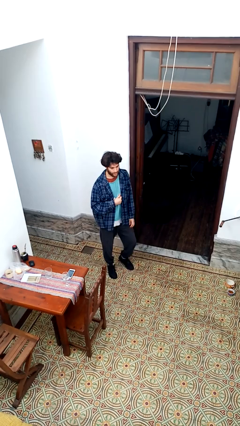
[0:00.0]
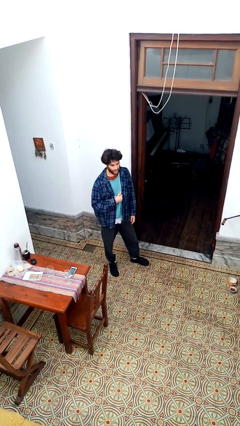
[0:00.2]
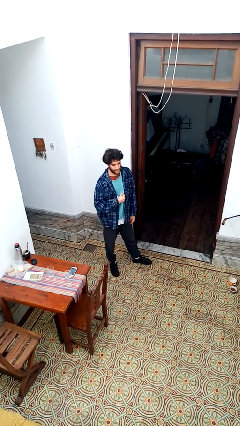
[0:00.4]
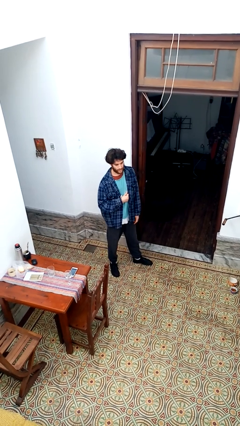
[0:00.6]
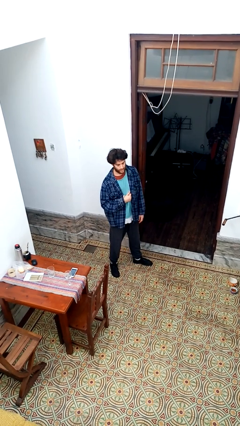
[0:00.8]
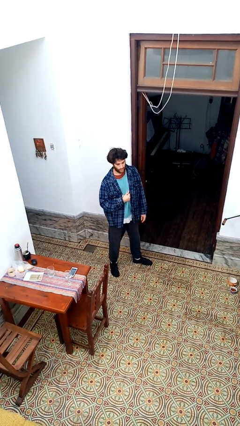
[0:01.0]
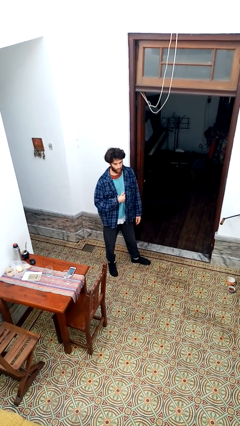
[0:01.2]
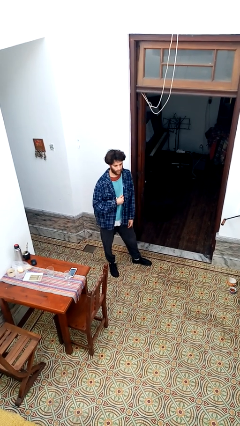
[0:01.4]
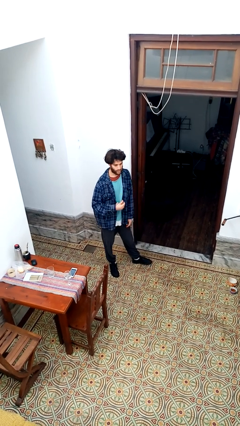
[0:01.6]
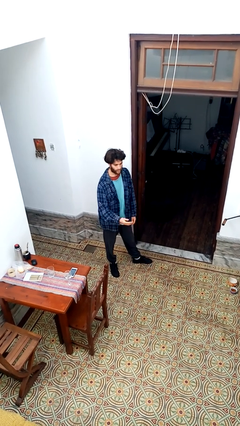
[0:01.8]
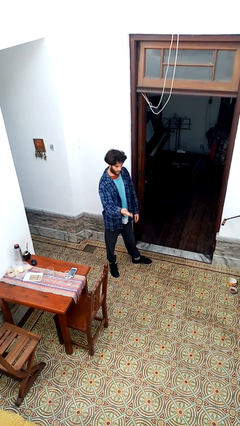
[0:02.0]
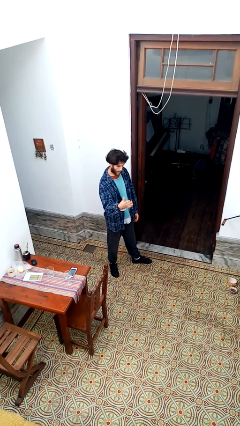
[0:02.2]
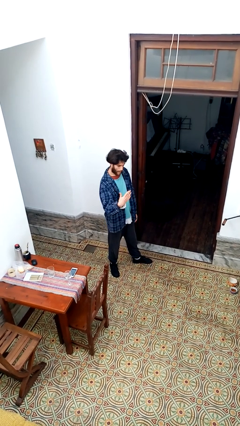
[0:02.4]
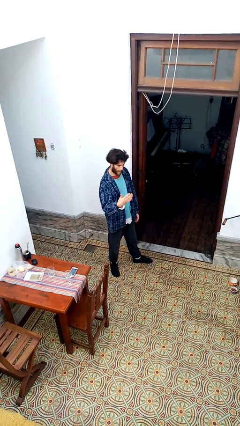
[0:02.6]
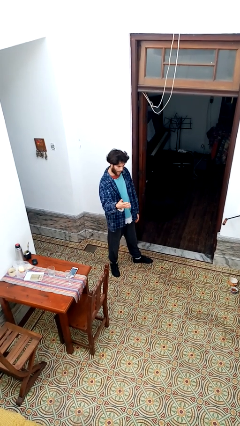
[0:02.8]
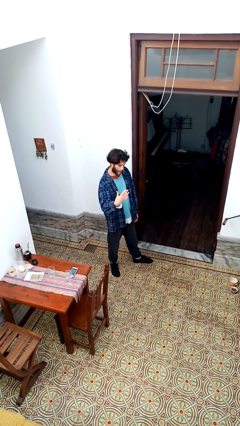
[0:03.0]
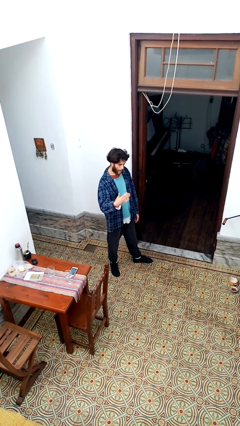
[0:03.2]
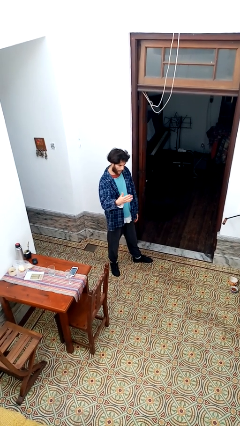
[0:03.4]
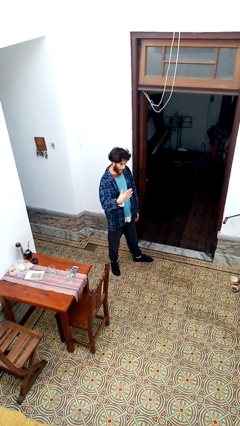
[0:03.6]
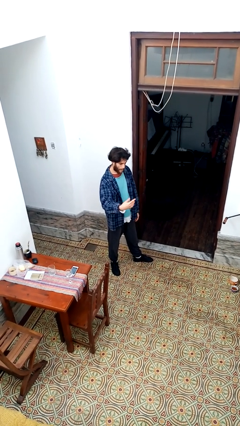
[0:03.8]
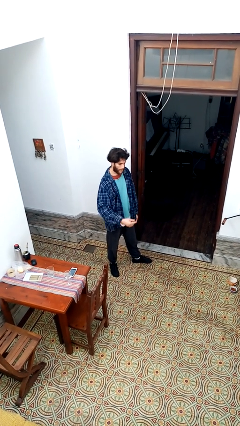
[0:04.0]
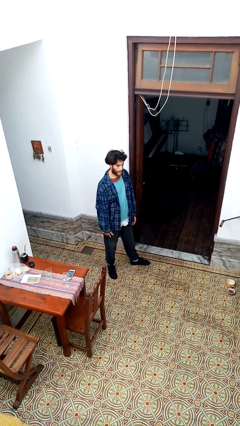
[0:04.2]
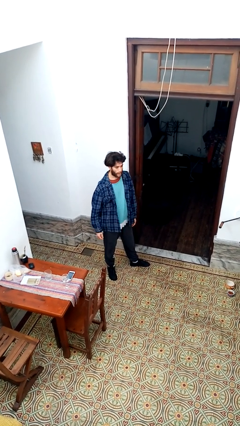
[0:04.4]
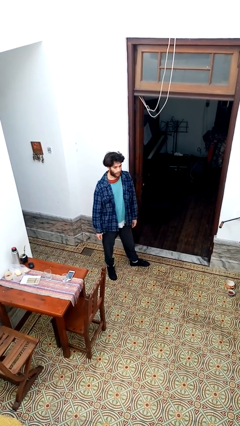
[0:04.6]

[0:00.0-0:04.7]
person gestures come here

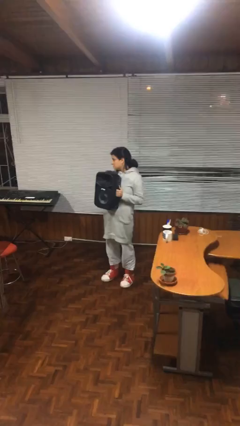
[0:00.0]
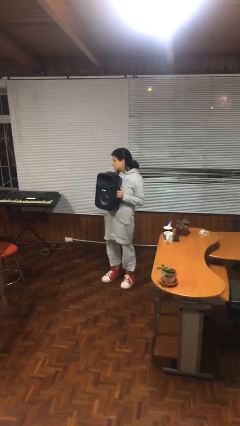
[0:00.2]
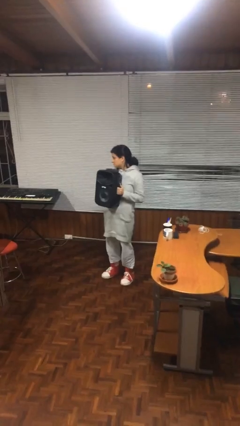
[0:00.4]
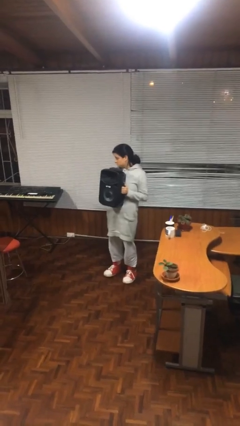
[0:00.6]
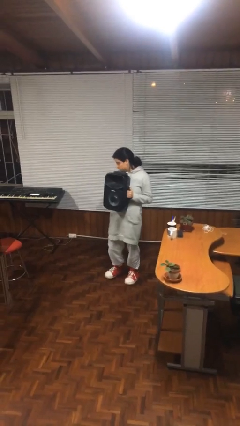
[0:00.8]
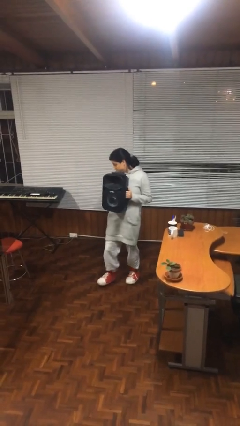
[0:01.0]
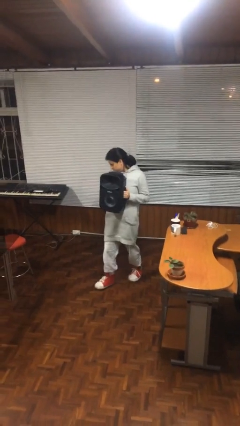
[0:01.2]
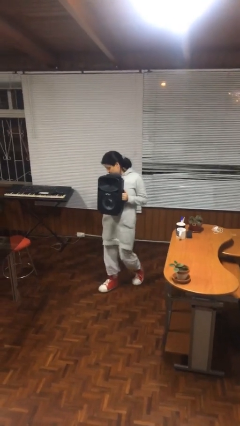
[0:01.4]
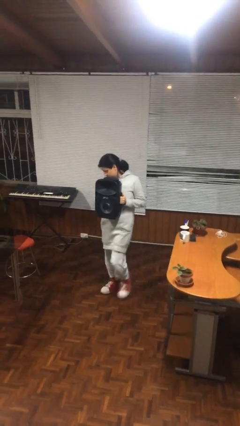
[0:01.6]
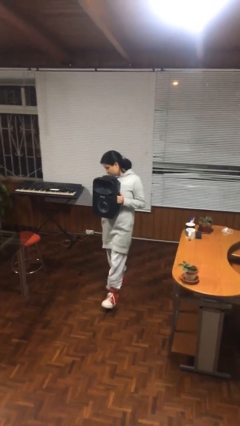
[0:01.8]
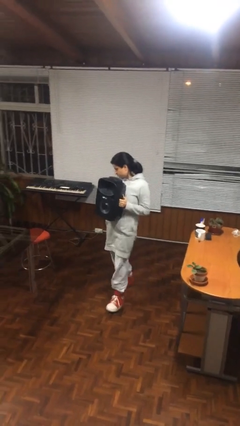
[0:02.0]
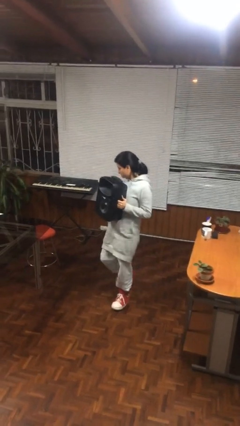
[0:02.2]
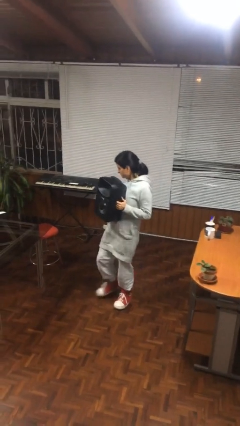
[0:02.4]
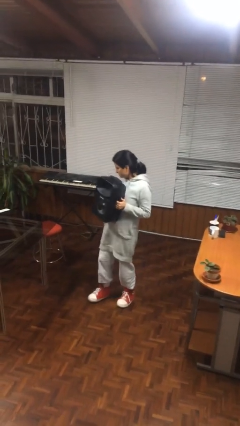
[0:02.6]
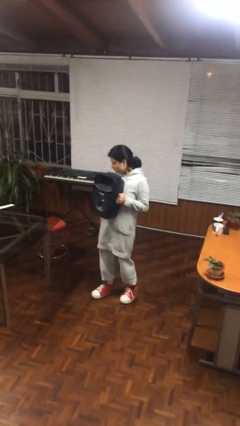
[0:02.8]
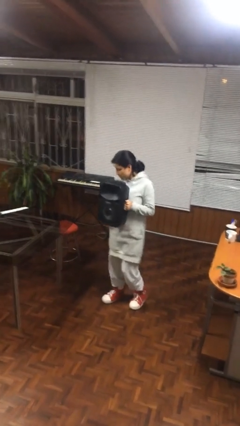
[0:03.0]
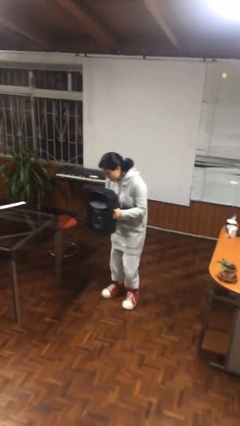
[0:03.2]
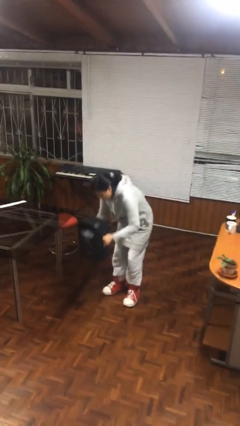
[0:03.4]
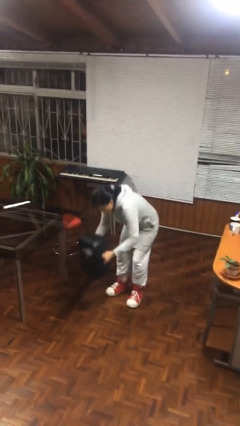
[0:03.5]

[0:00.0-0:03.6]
person carries heavy object

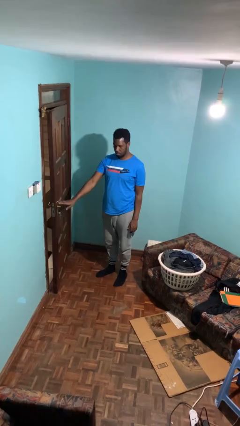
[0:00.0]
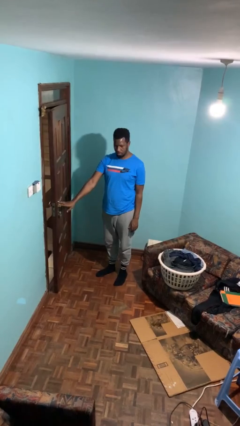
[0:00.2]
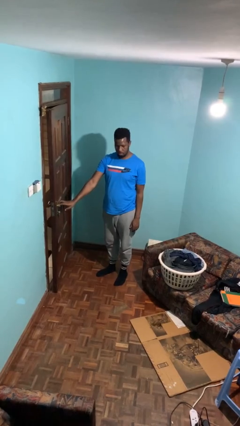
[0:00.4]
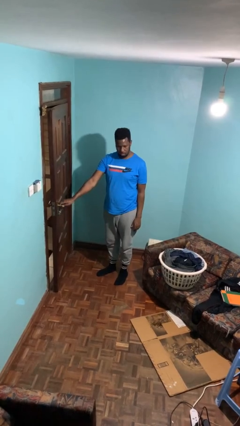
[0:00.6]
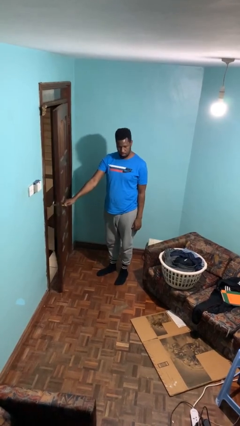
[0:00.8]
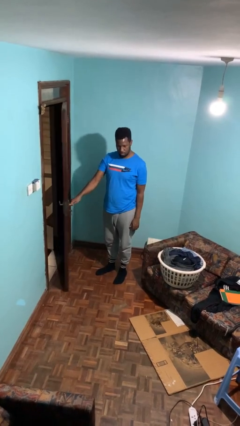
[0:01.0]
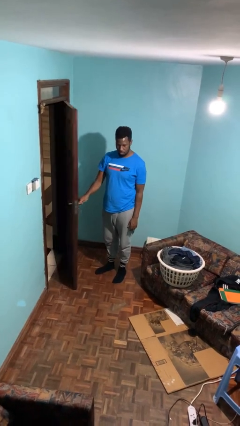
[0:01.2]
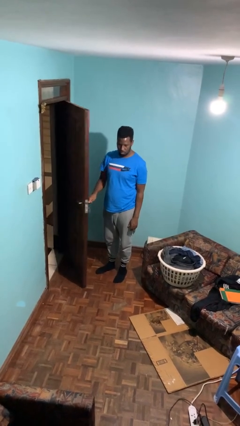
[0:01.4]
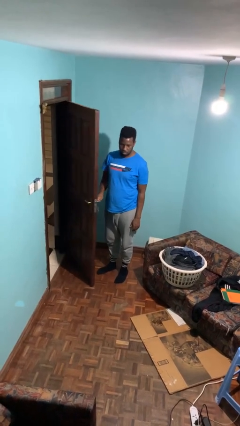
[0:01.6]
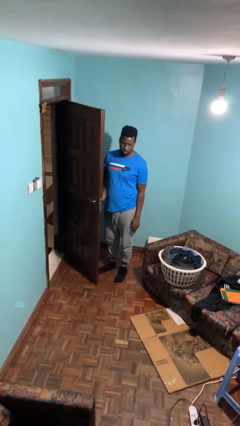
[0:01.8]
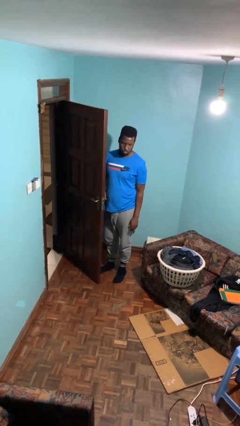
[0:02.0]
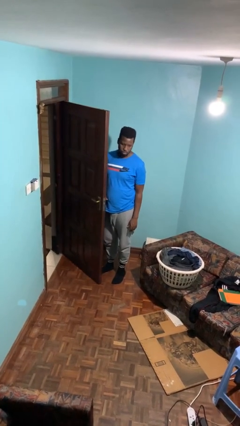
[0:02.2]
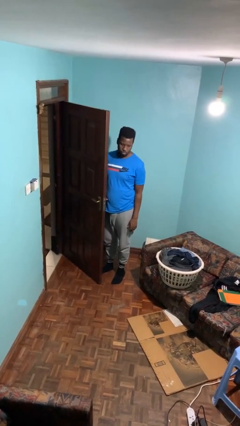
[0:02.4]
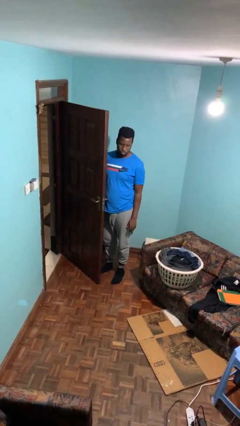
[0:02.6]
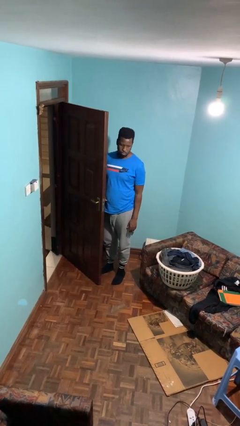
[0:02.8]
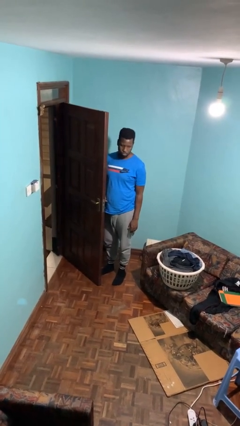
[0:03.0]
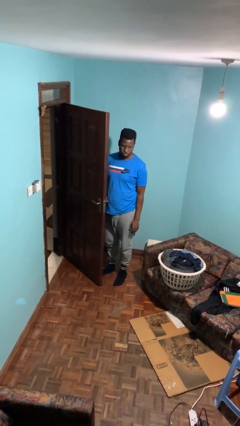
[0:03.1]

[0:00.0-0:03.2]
person opens facility door

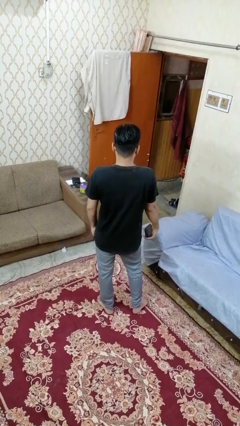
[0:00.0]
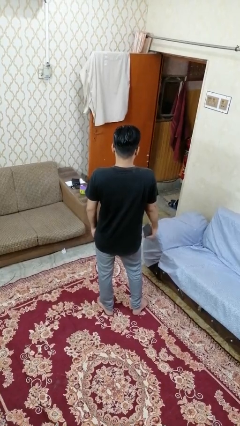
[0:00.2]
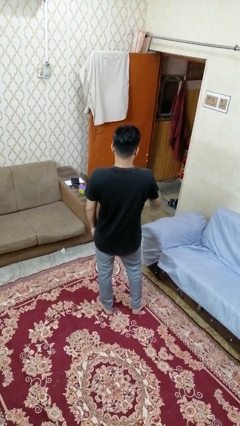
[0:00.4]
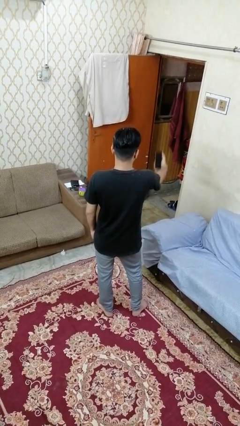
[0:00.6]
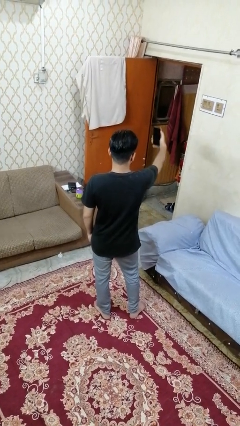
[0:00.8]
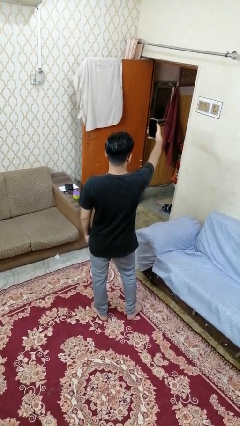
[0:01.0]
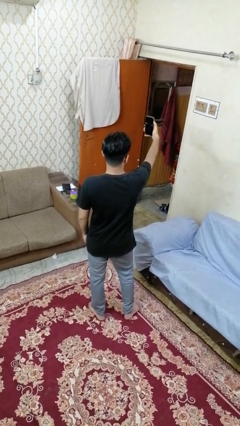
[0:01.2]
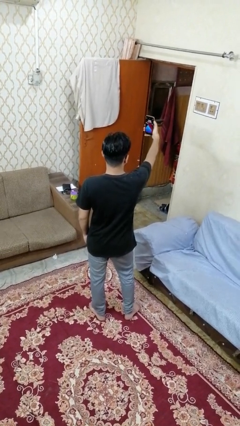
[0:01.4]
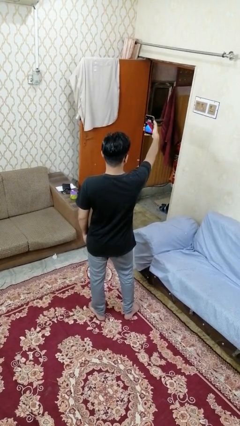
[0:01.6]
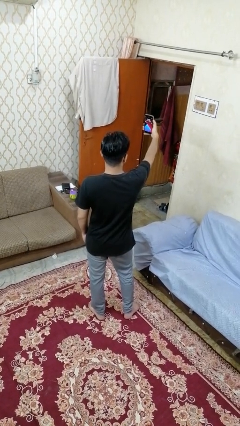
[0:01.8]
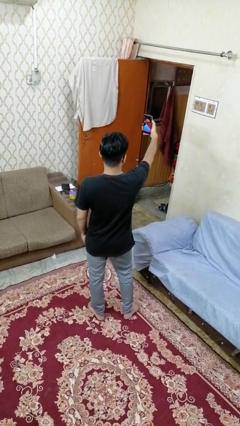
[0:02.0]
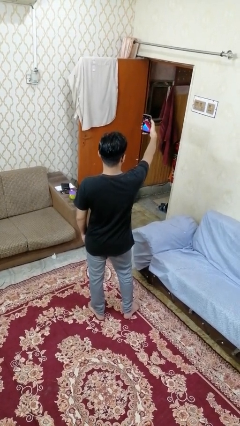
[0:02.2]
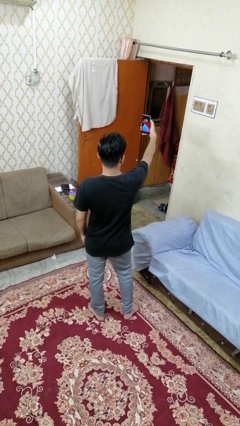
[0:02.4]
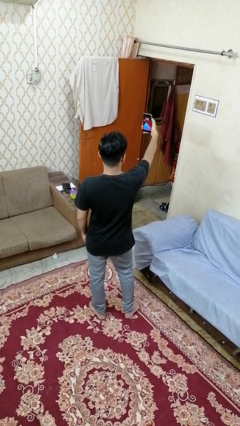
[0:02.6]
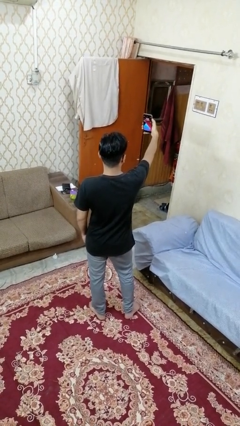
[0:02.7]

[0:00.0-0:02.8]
person takes selfie

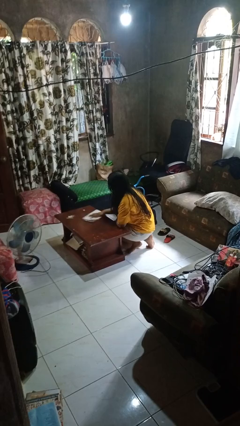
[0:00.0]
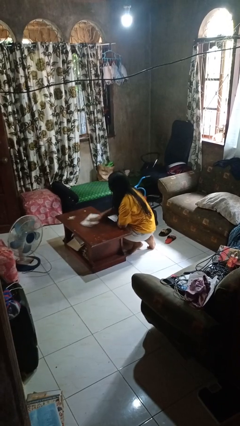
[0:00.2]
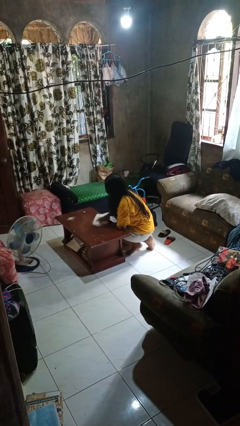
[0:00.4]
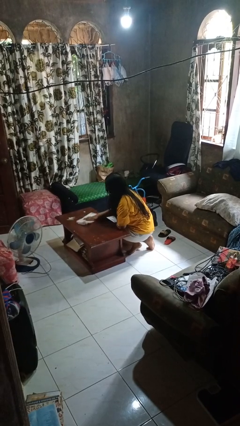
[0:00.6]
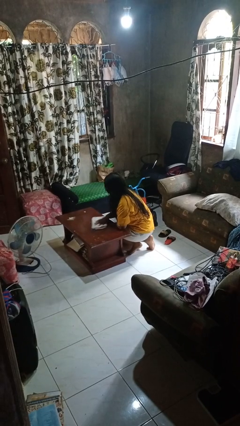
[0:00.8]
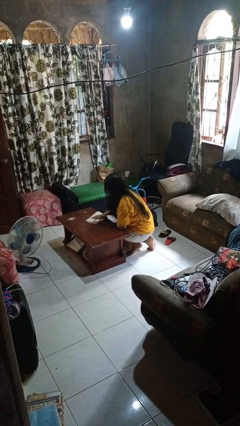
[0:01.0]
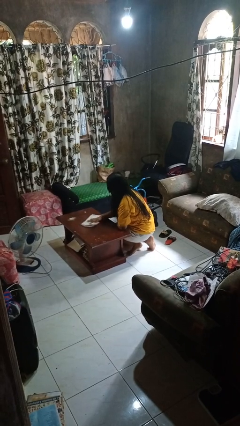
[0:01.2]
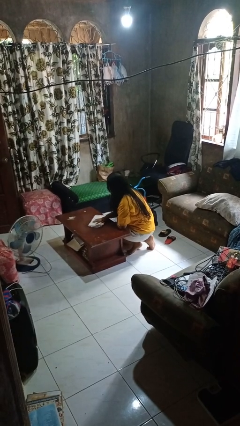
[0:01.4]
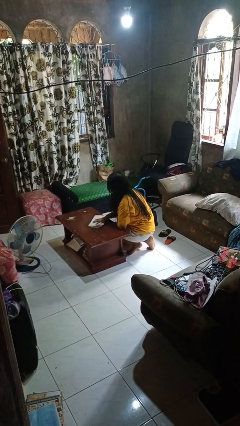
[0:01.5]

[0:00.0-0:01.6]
person cleans table with rag

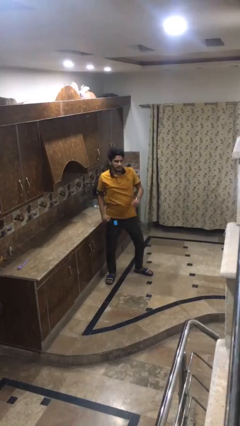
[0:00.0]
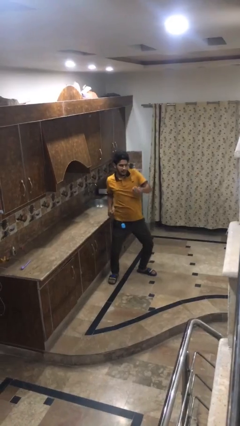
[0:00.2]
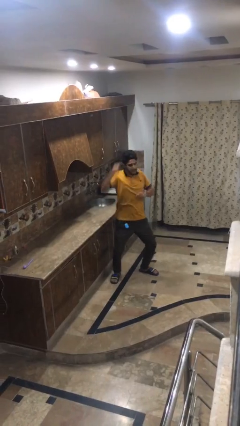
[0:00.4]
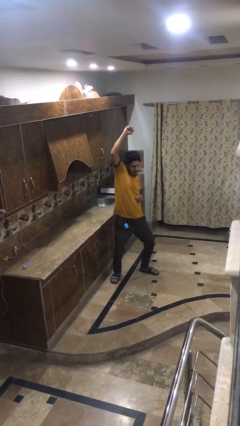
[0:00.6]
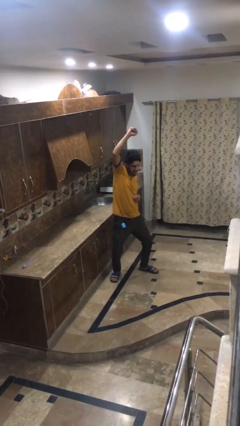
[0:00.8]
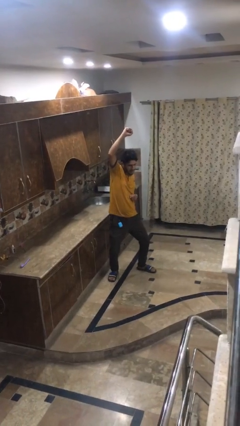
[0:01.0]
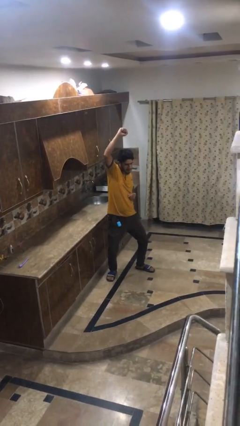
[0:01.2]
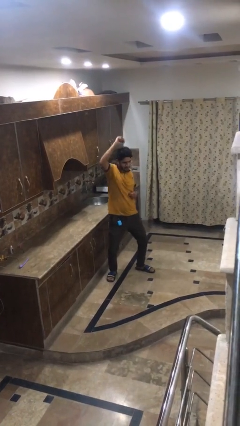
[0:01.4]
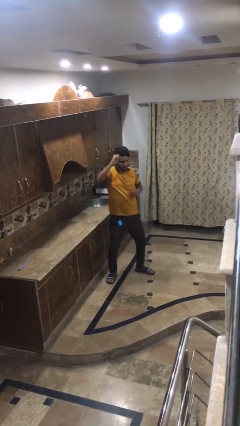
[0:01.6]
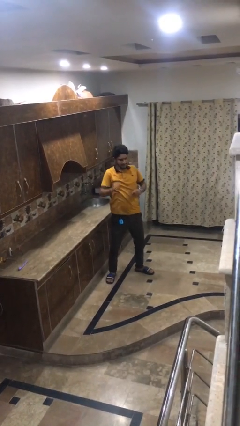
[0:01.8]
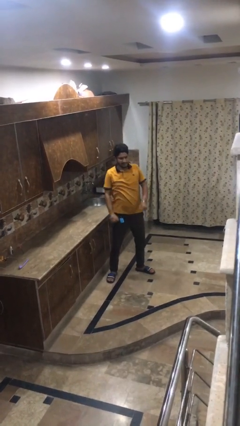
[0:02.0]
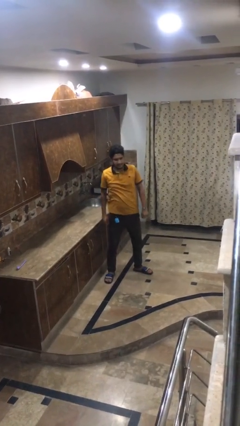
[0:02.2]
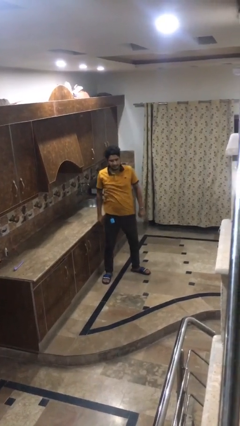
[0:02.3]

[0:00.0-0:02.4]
person punches
